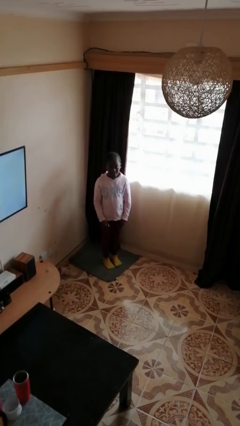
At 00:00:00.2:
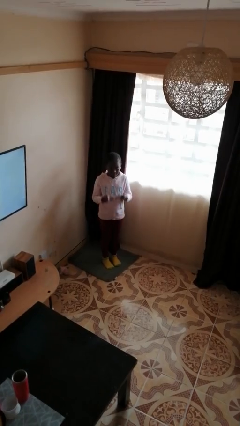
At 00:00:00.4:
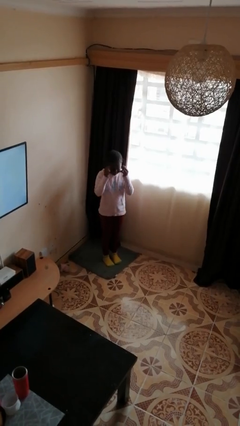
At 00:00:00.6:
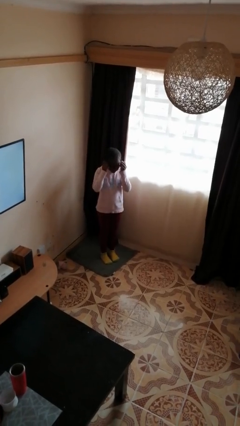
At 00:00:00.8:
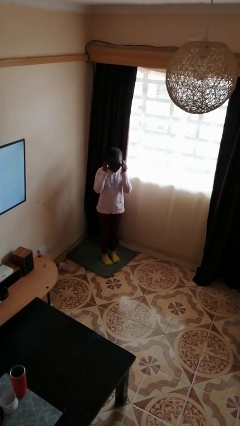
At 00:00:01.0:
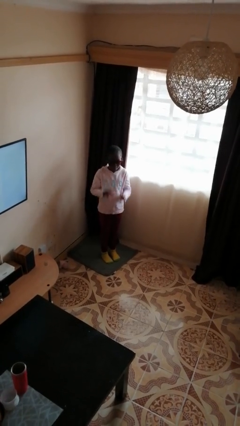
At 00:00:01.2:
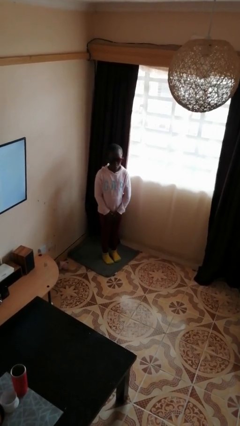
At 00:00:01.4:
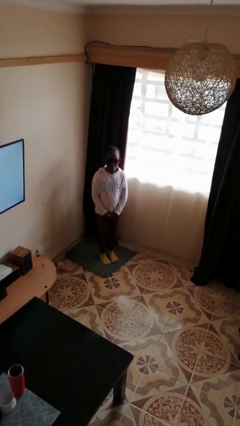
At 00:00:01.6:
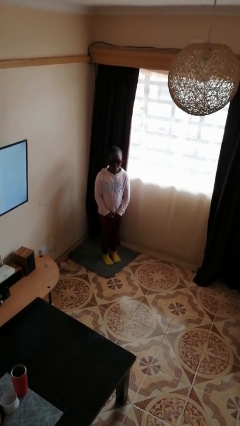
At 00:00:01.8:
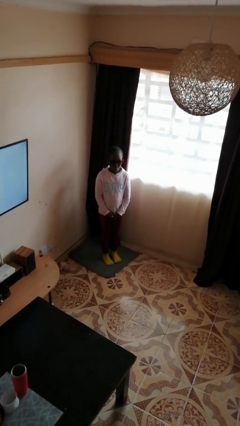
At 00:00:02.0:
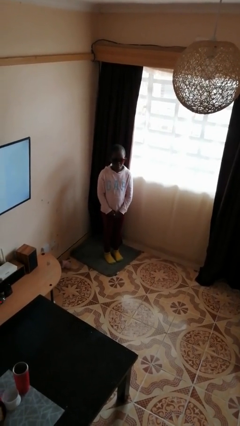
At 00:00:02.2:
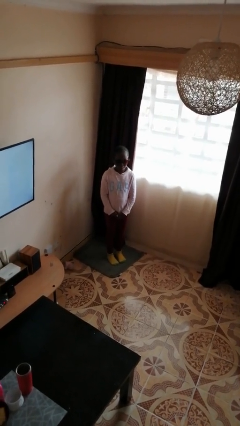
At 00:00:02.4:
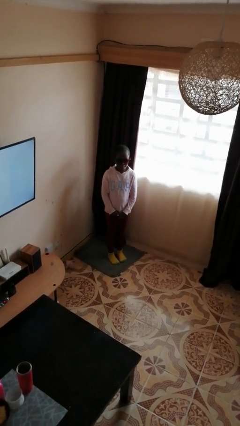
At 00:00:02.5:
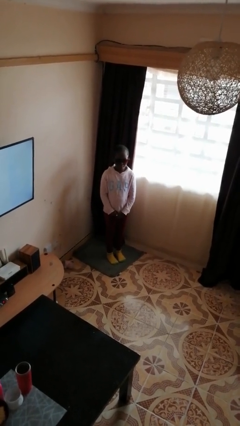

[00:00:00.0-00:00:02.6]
person puts on sunglasses

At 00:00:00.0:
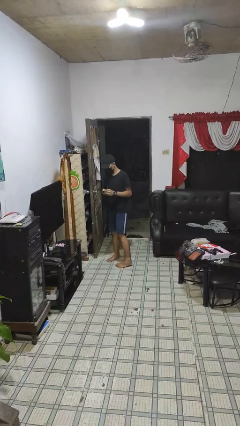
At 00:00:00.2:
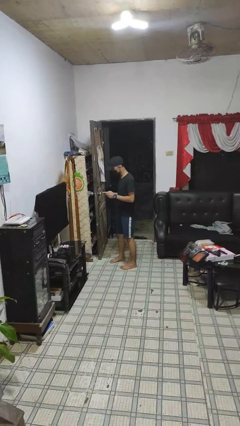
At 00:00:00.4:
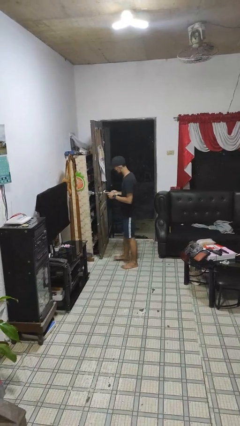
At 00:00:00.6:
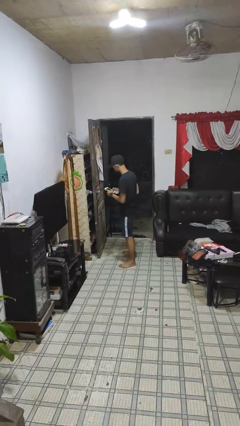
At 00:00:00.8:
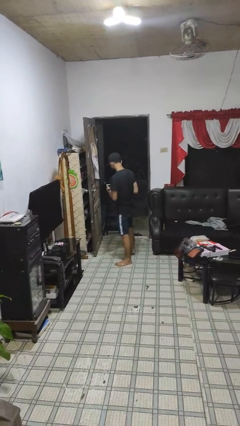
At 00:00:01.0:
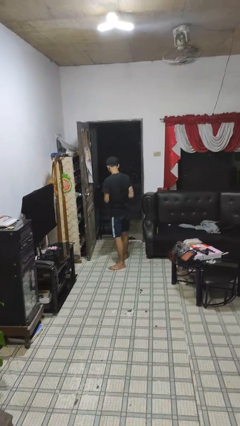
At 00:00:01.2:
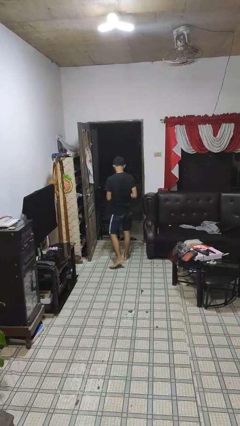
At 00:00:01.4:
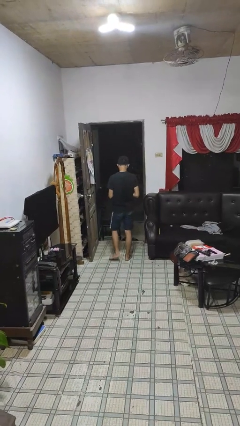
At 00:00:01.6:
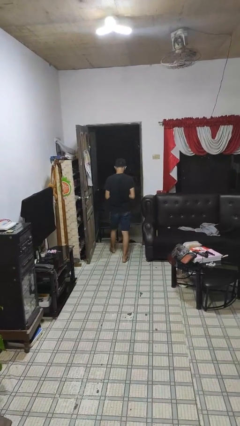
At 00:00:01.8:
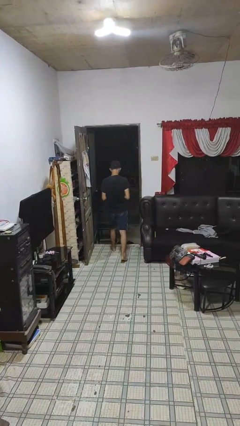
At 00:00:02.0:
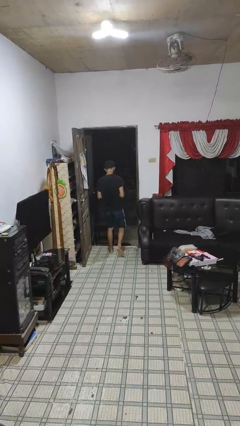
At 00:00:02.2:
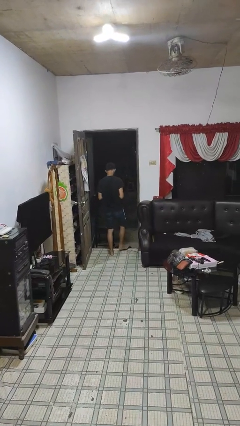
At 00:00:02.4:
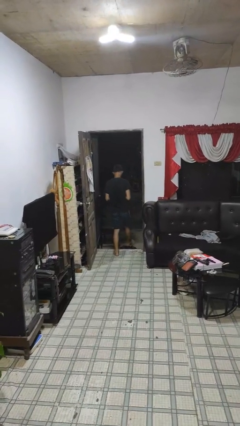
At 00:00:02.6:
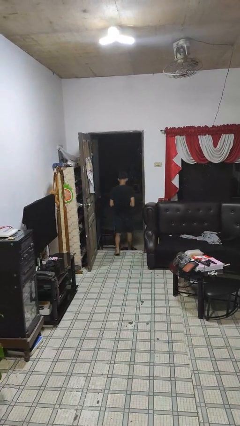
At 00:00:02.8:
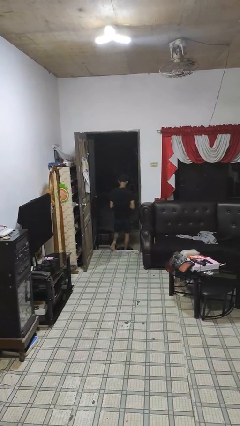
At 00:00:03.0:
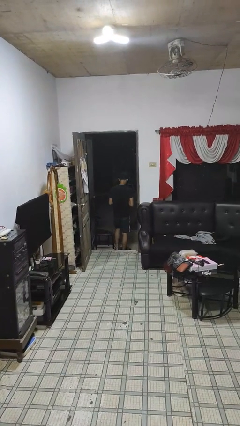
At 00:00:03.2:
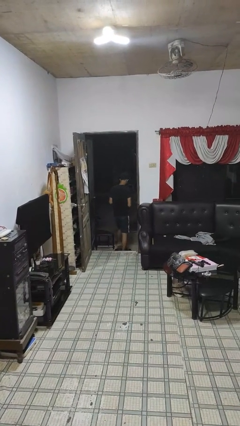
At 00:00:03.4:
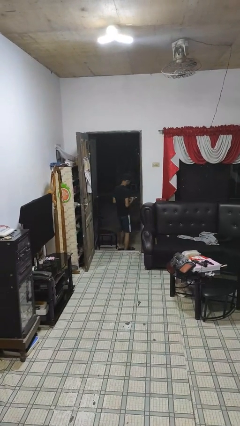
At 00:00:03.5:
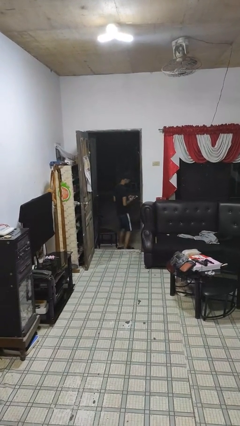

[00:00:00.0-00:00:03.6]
person exits scene through structure

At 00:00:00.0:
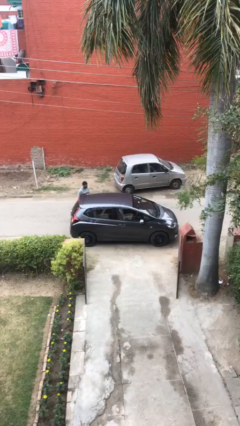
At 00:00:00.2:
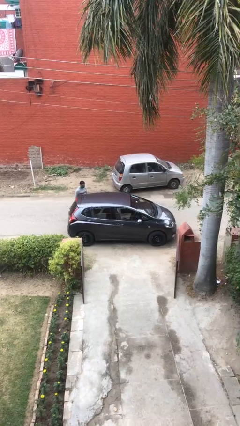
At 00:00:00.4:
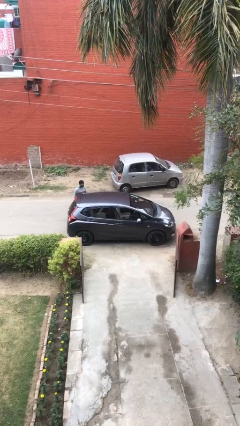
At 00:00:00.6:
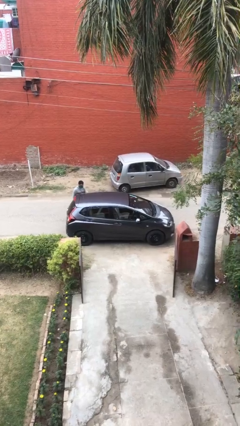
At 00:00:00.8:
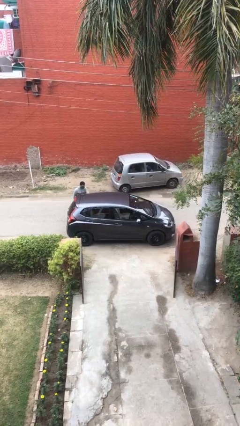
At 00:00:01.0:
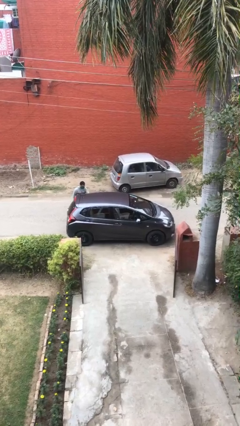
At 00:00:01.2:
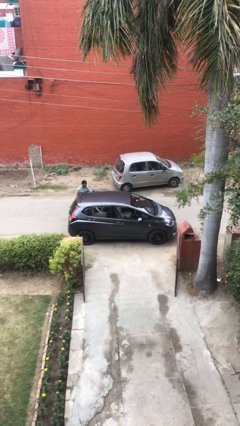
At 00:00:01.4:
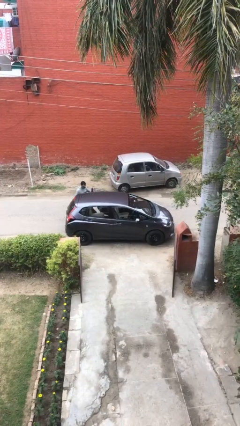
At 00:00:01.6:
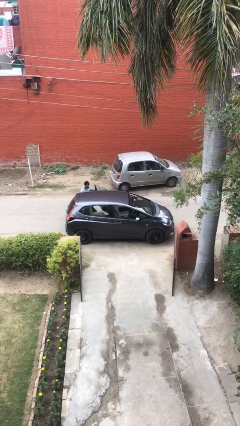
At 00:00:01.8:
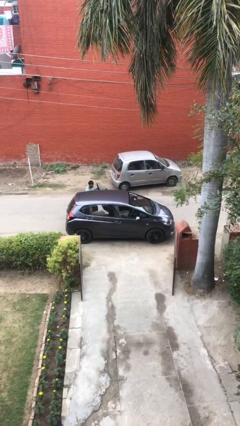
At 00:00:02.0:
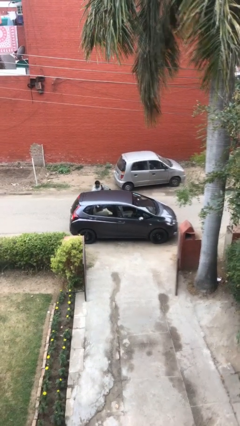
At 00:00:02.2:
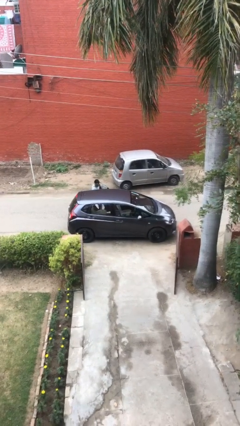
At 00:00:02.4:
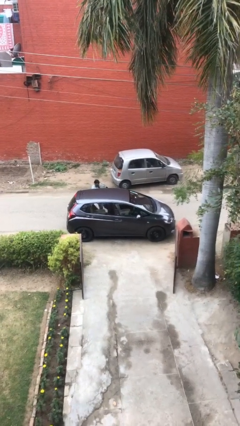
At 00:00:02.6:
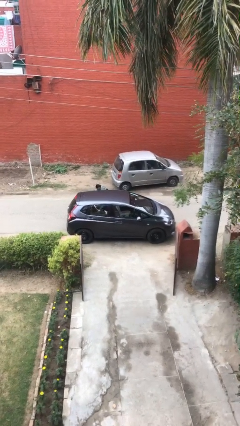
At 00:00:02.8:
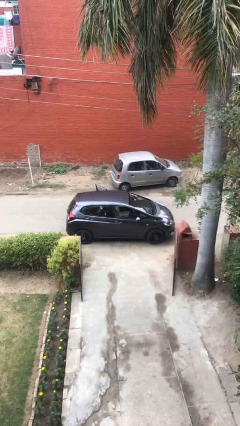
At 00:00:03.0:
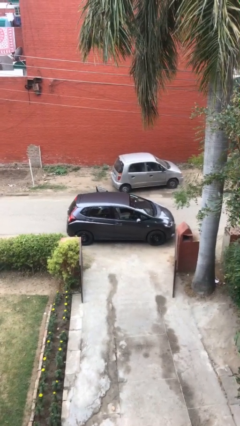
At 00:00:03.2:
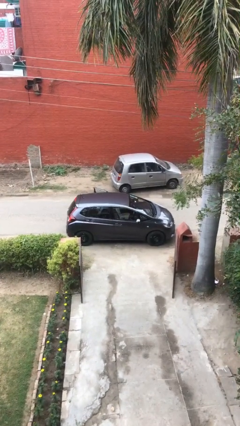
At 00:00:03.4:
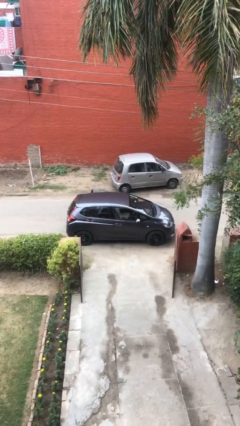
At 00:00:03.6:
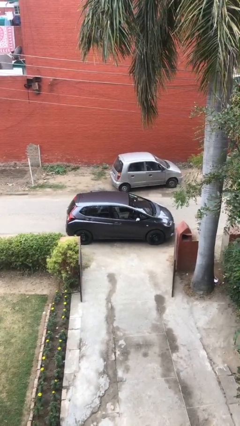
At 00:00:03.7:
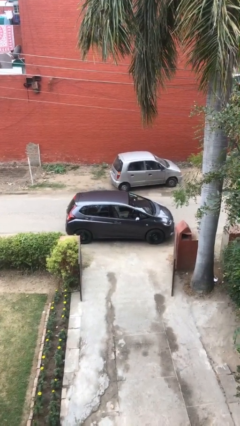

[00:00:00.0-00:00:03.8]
car picks up person

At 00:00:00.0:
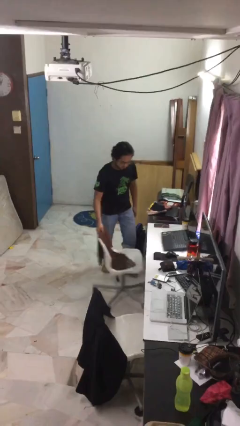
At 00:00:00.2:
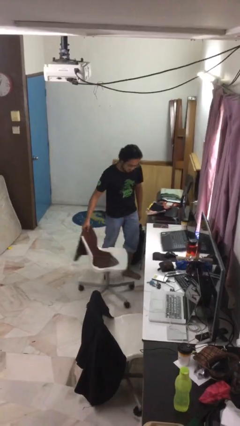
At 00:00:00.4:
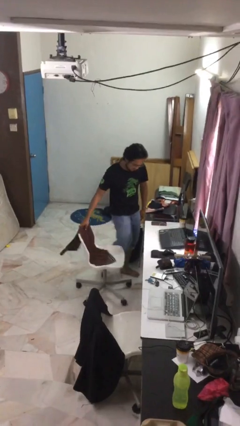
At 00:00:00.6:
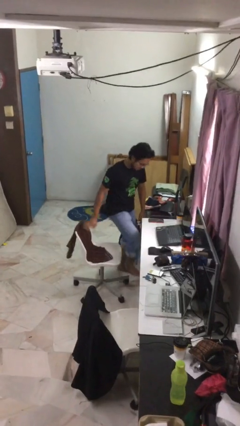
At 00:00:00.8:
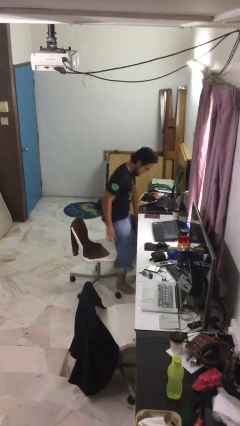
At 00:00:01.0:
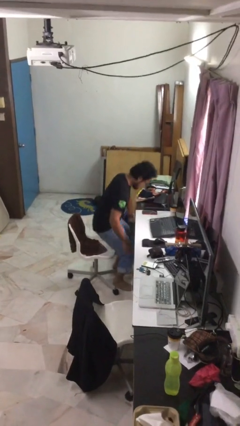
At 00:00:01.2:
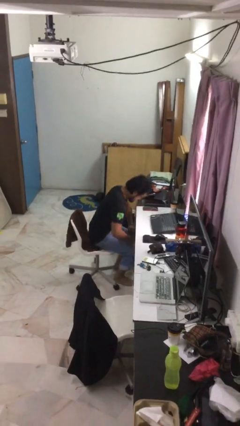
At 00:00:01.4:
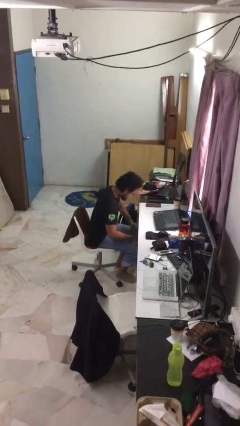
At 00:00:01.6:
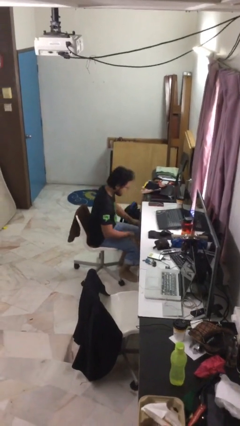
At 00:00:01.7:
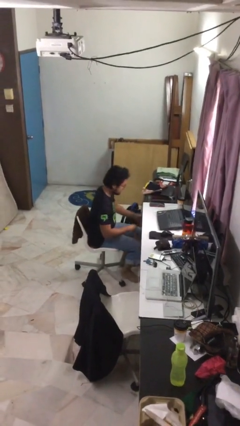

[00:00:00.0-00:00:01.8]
person sits down

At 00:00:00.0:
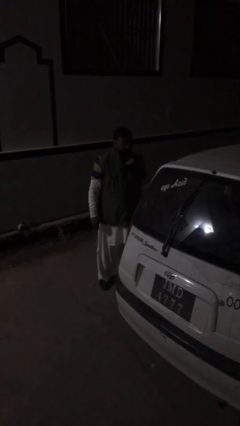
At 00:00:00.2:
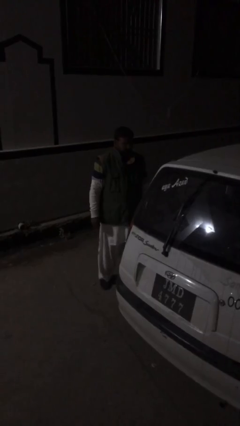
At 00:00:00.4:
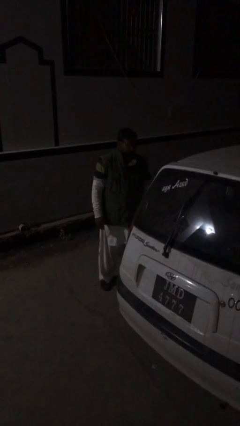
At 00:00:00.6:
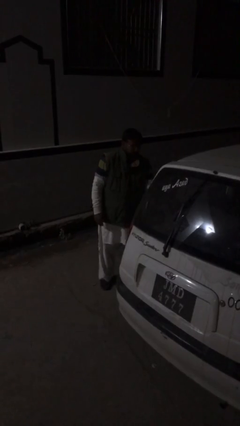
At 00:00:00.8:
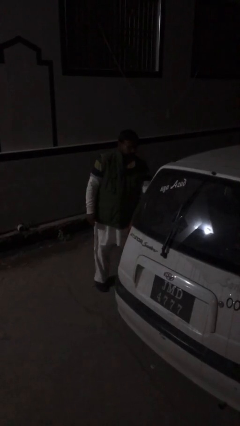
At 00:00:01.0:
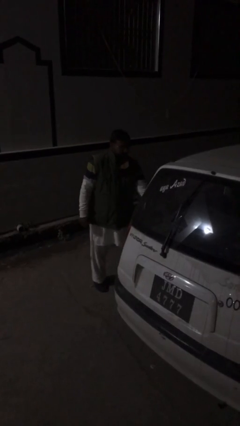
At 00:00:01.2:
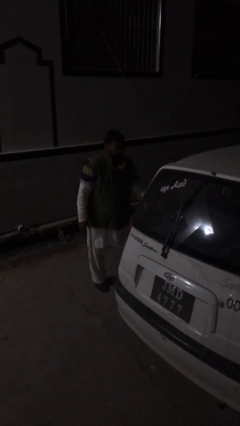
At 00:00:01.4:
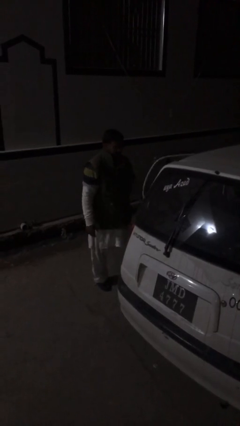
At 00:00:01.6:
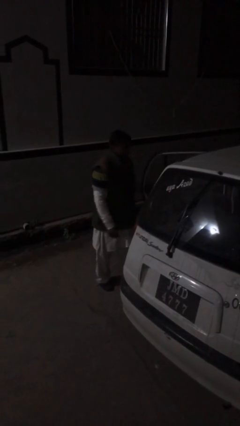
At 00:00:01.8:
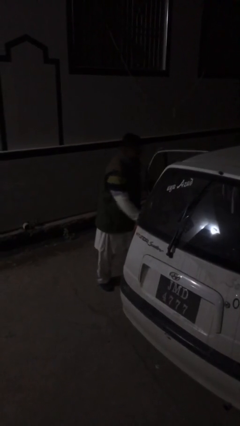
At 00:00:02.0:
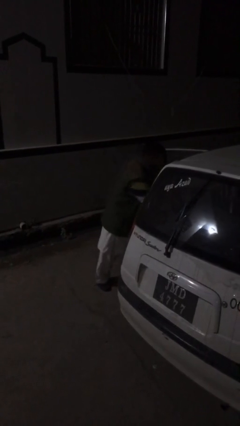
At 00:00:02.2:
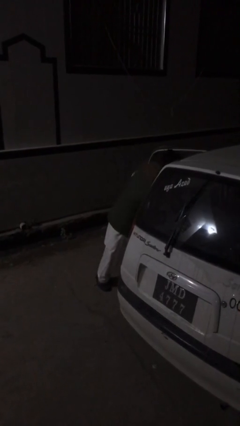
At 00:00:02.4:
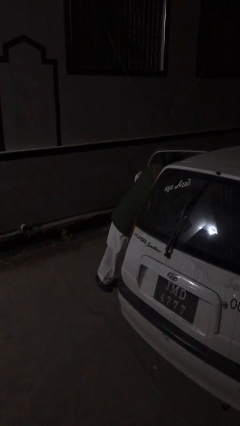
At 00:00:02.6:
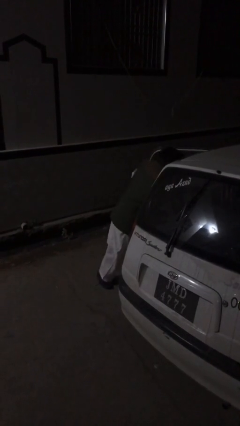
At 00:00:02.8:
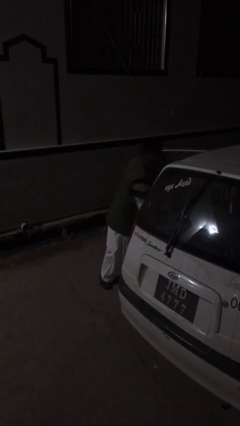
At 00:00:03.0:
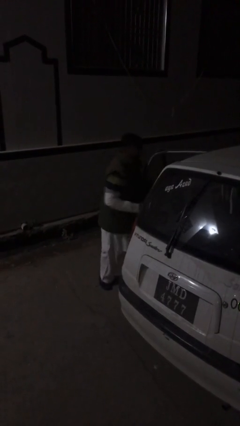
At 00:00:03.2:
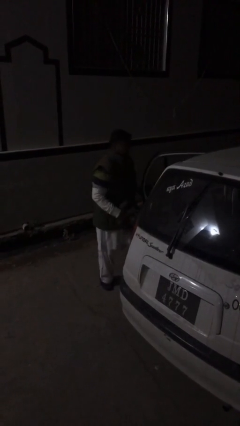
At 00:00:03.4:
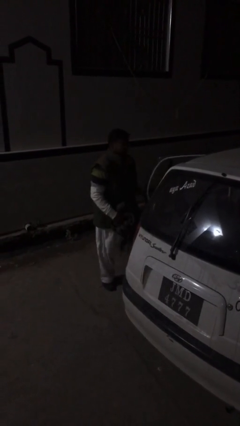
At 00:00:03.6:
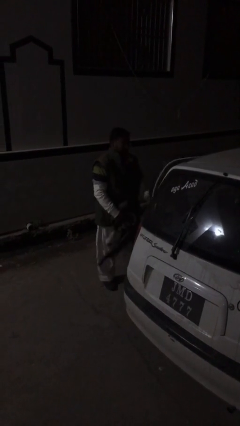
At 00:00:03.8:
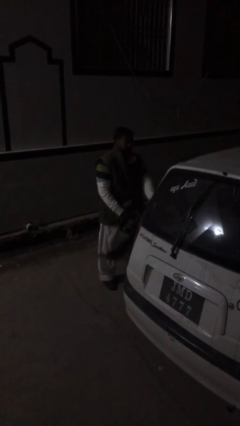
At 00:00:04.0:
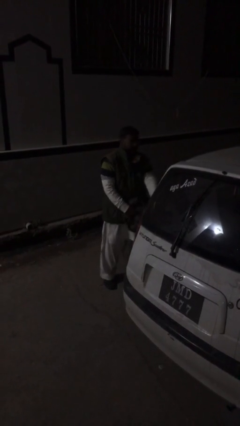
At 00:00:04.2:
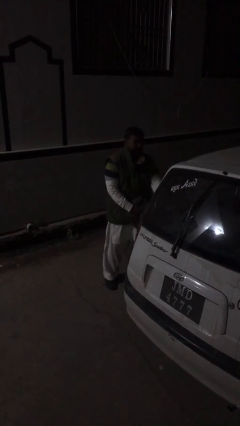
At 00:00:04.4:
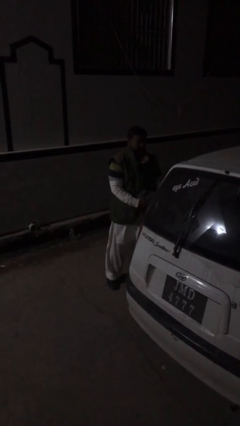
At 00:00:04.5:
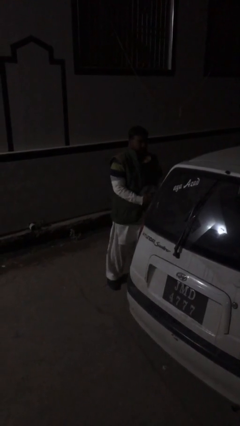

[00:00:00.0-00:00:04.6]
person unloads car

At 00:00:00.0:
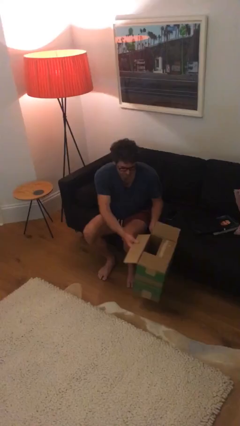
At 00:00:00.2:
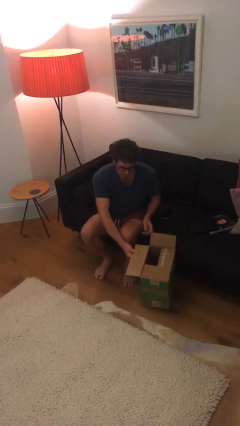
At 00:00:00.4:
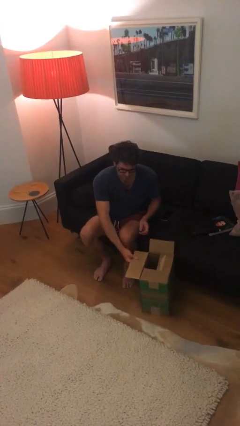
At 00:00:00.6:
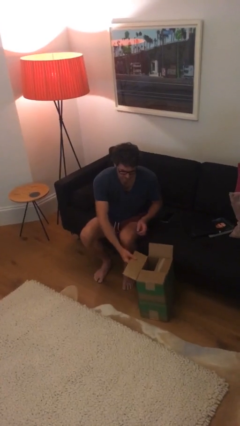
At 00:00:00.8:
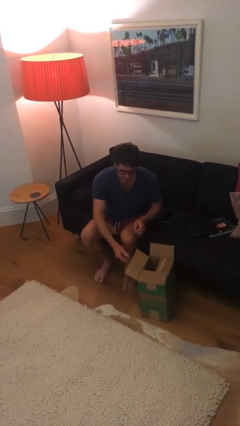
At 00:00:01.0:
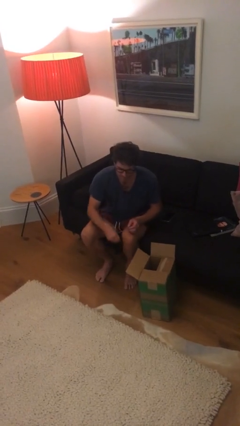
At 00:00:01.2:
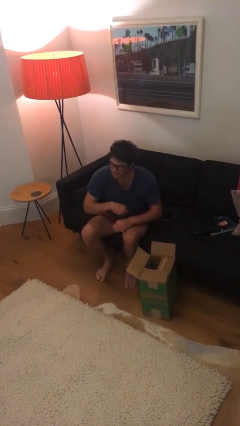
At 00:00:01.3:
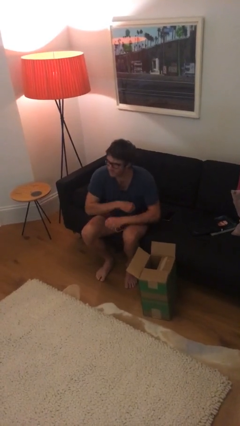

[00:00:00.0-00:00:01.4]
person puts down object on floor
